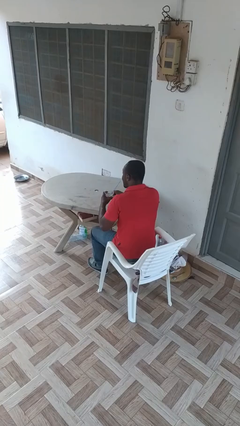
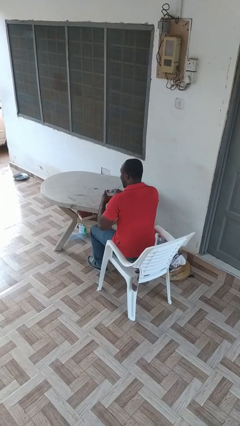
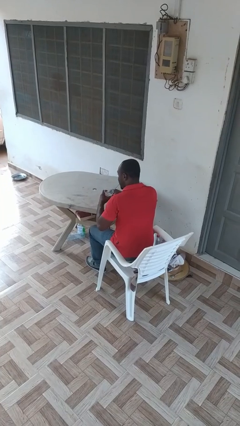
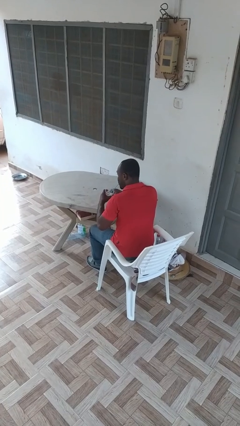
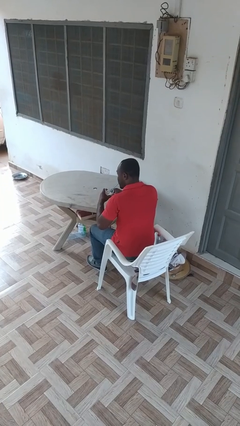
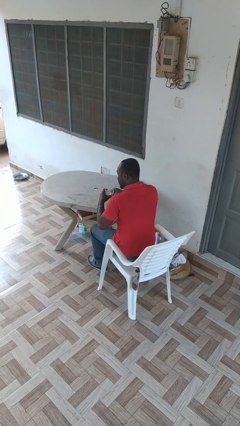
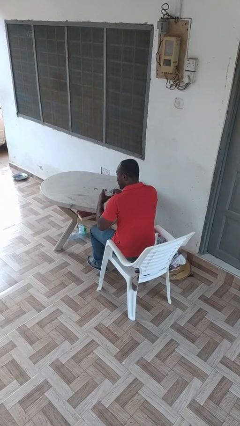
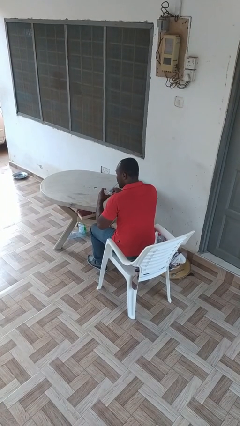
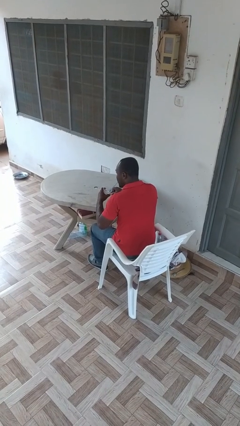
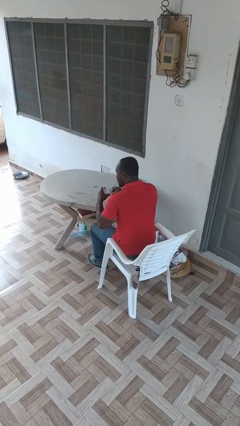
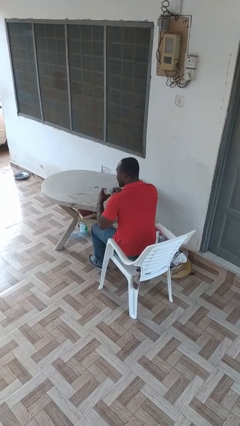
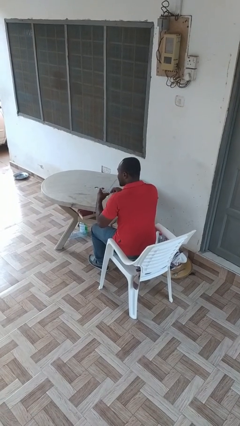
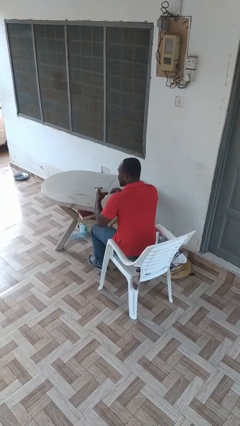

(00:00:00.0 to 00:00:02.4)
person drinks from straw

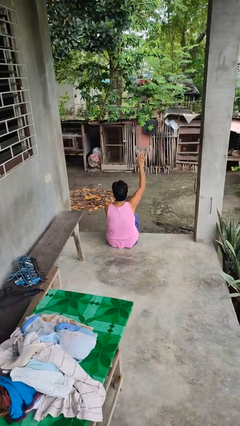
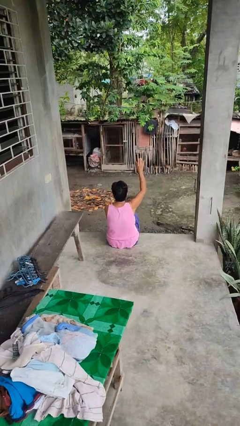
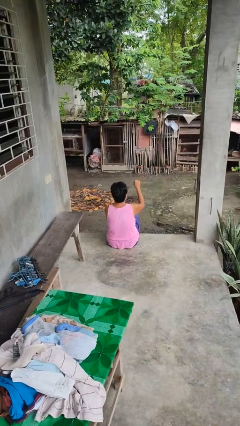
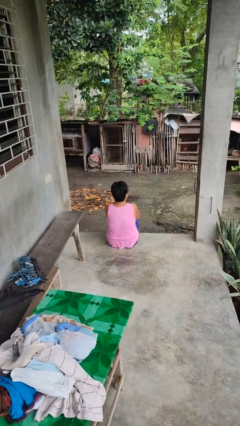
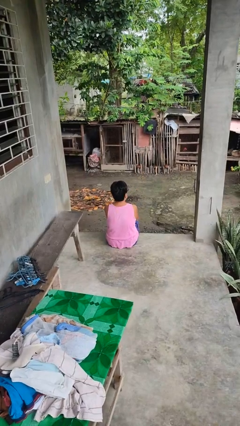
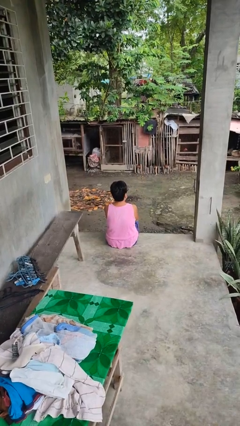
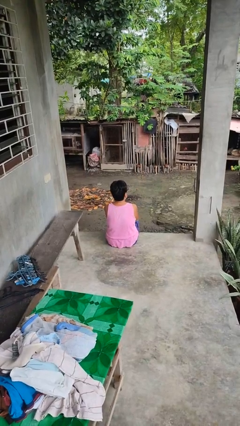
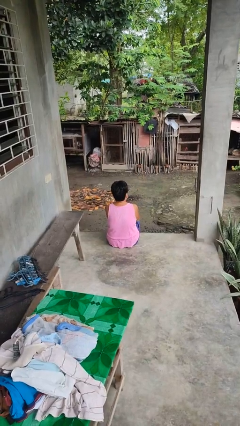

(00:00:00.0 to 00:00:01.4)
person gestures lower hand

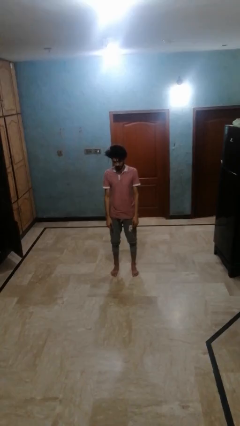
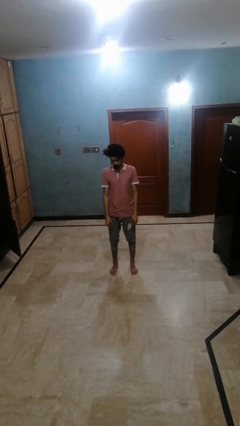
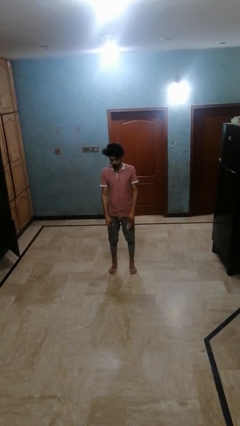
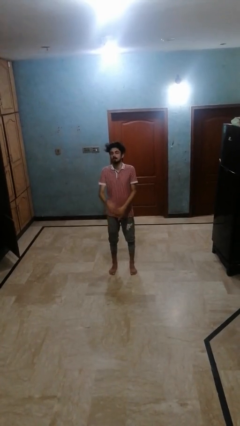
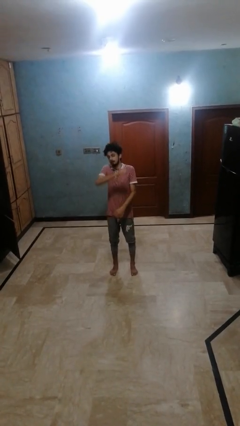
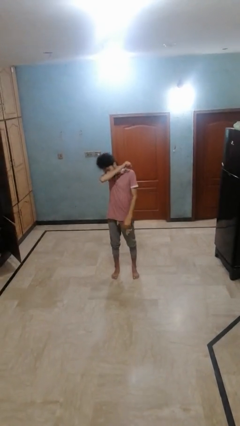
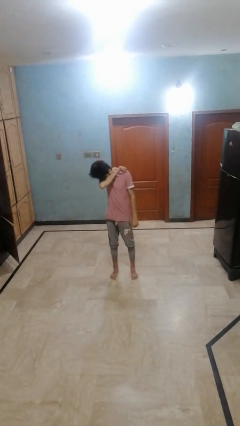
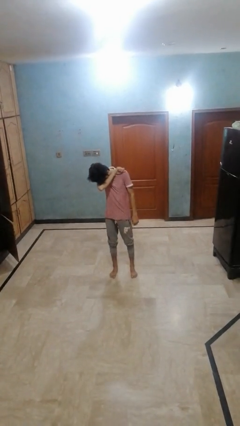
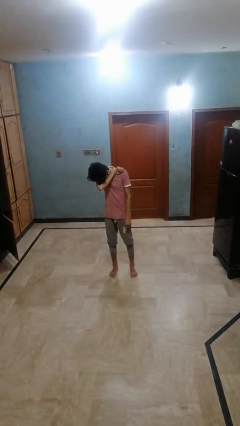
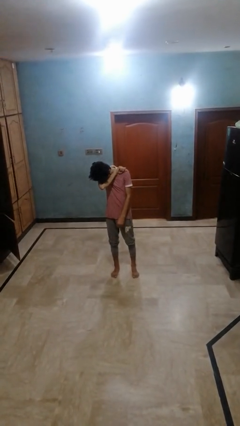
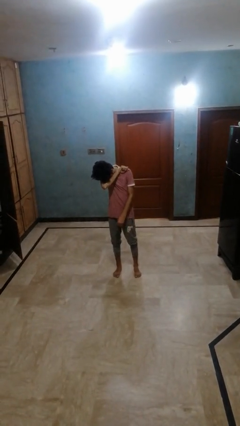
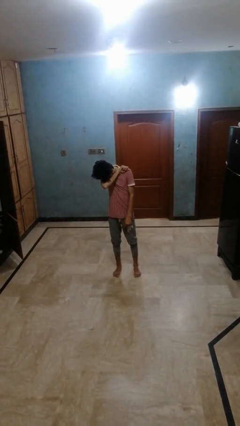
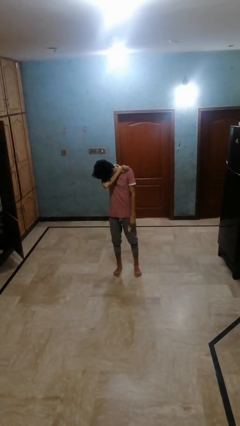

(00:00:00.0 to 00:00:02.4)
person sneezes into arm

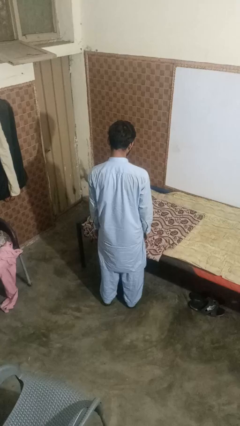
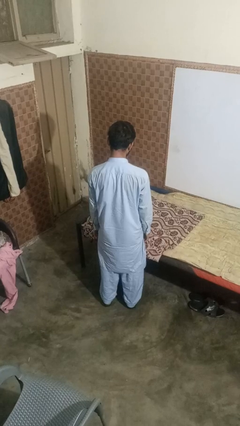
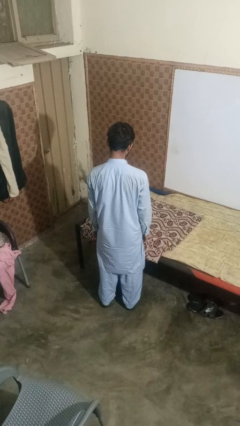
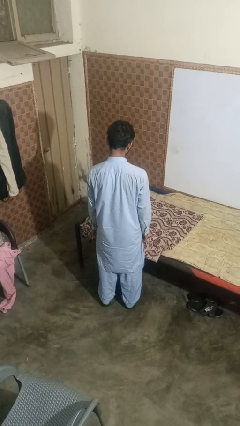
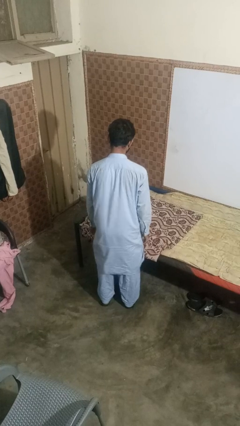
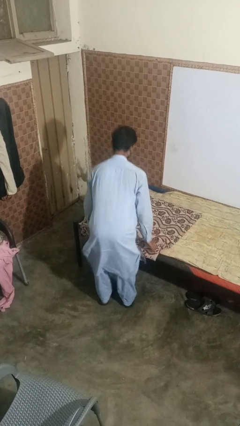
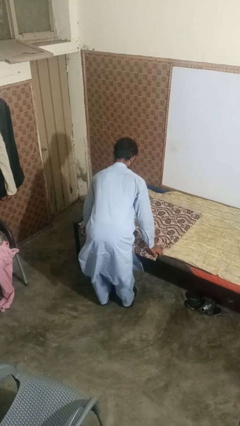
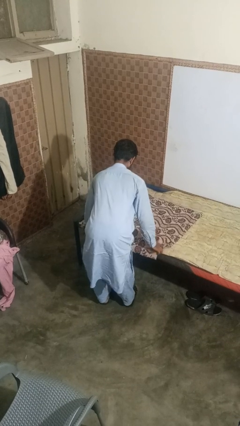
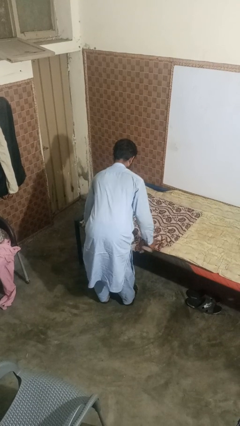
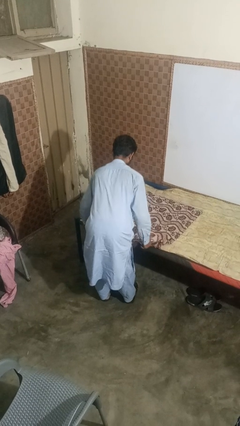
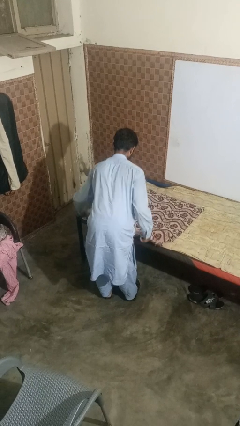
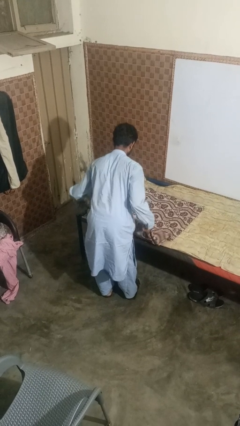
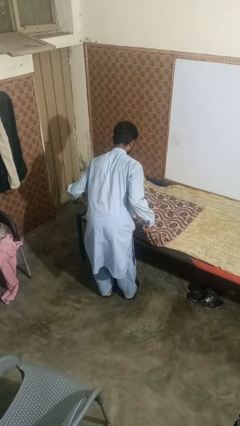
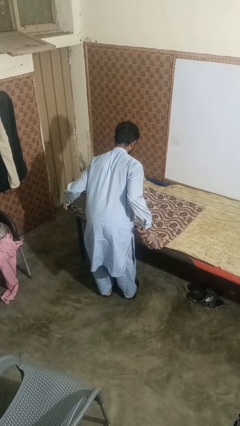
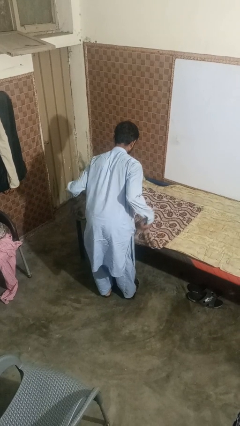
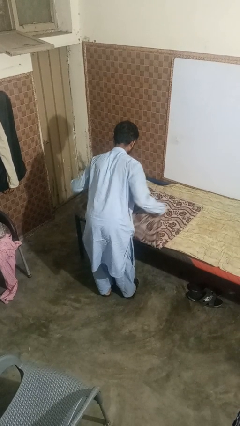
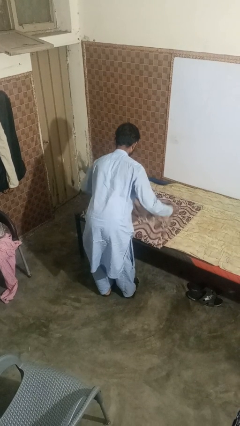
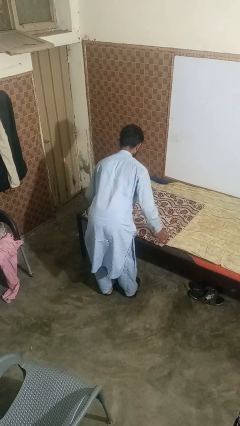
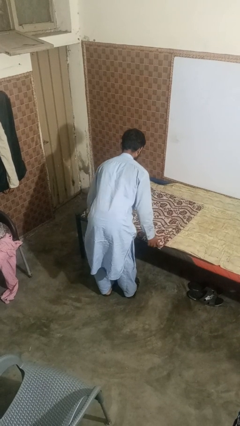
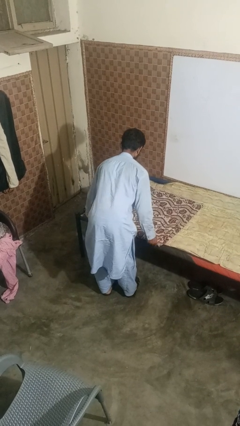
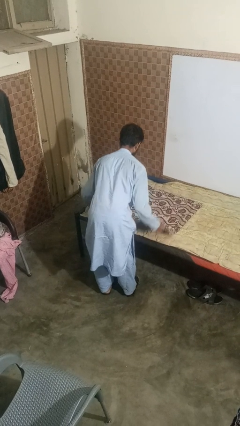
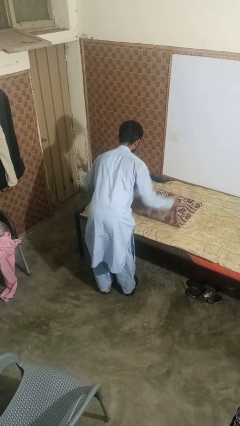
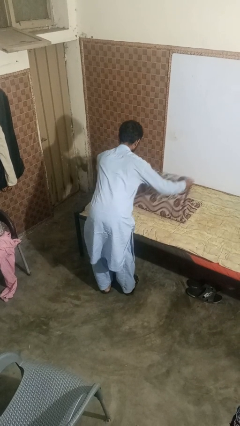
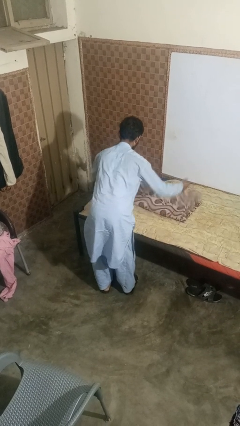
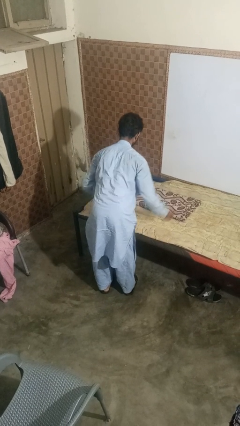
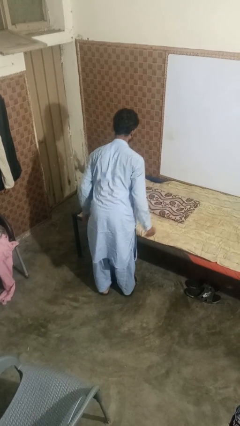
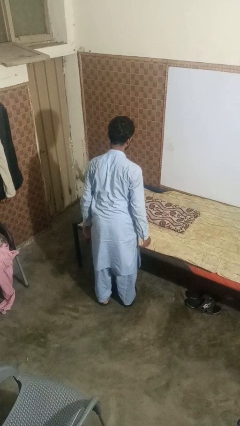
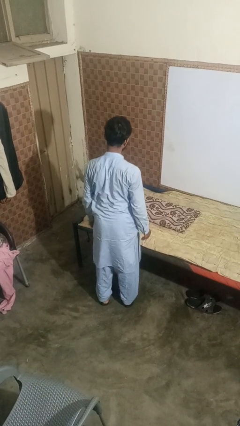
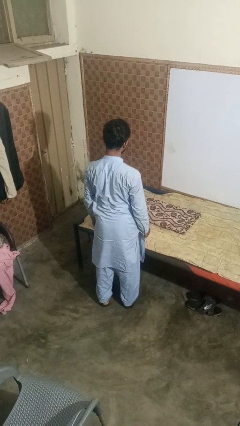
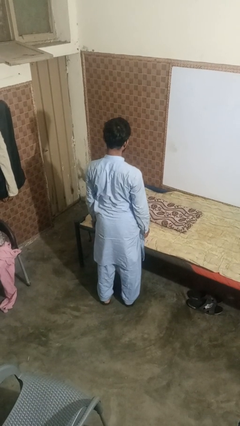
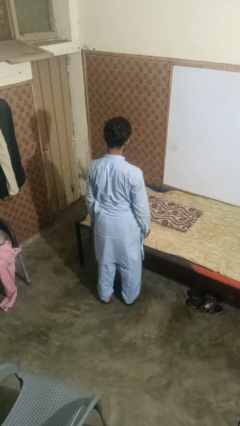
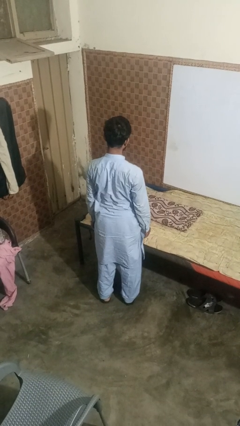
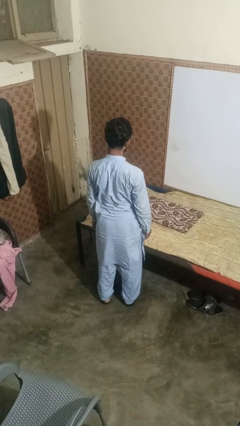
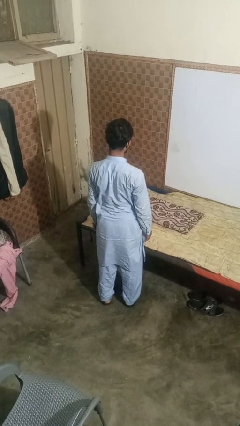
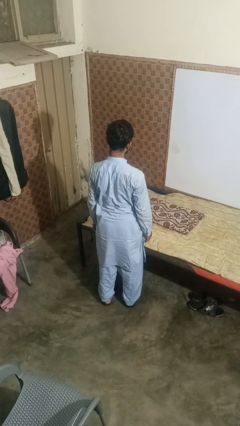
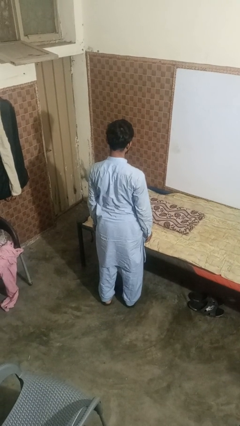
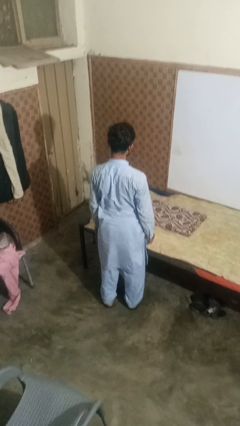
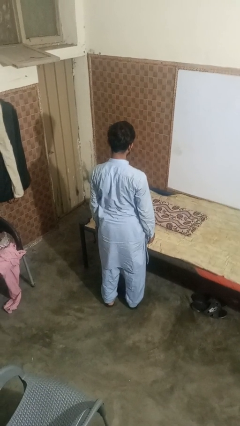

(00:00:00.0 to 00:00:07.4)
person folds blanket

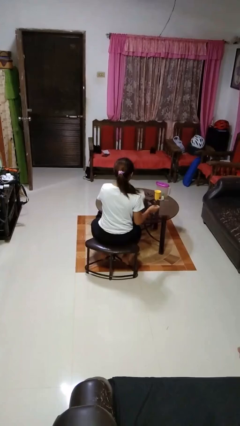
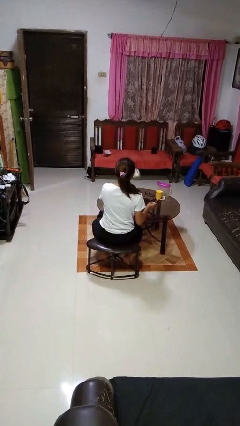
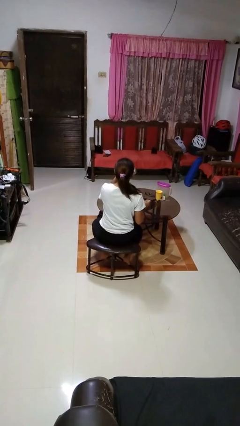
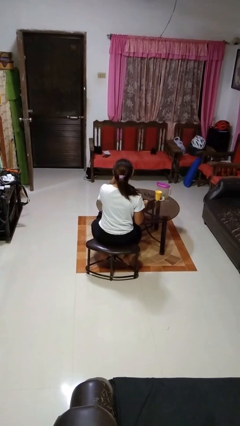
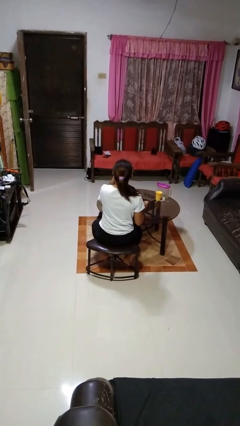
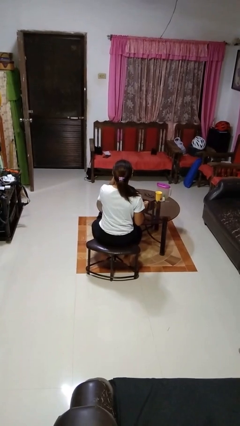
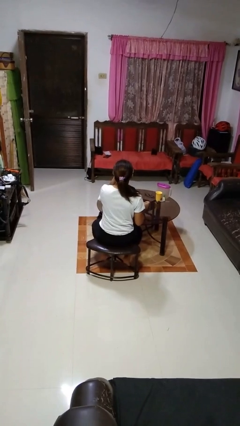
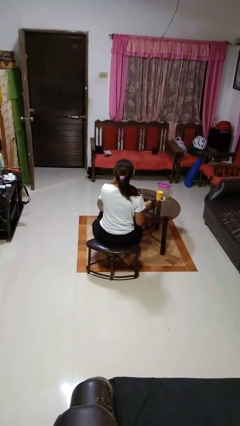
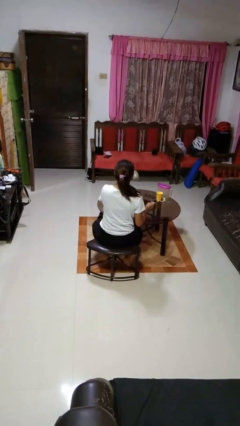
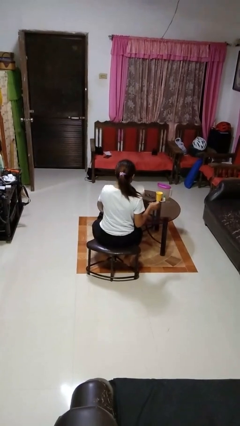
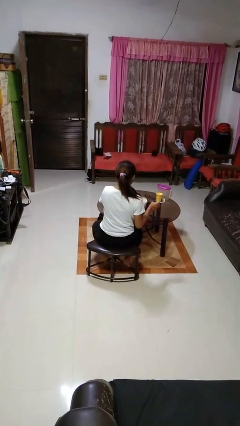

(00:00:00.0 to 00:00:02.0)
person drinks from mug

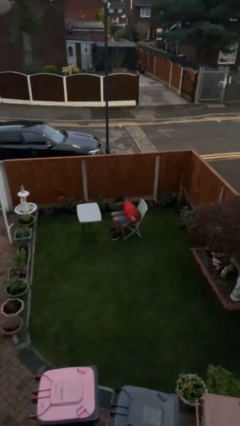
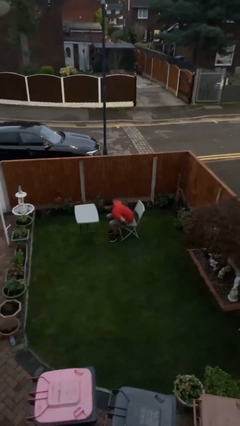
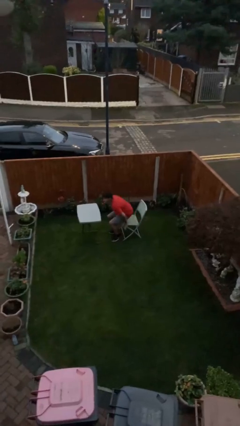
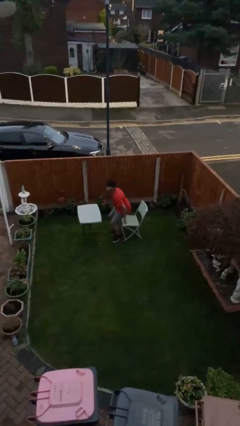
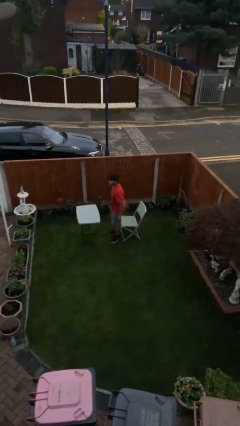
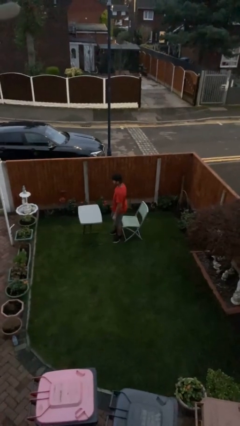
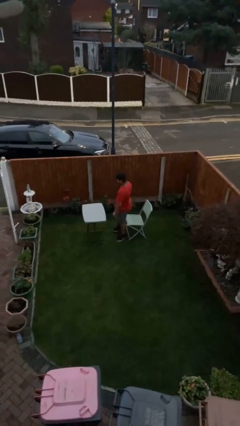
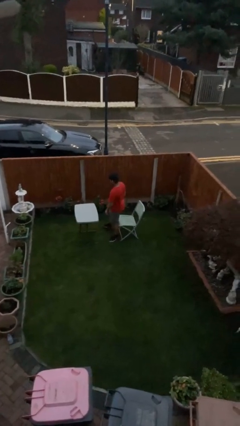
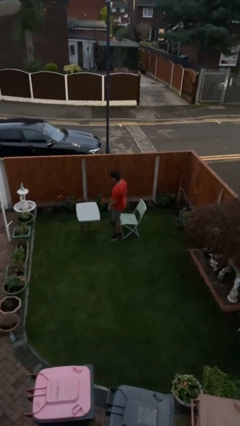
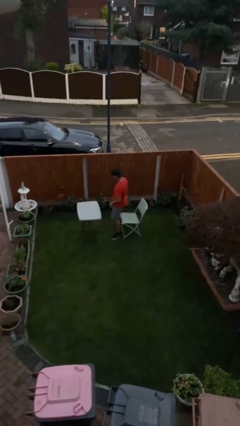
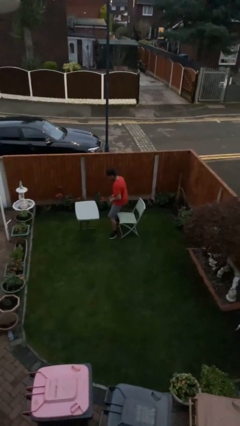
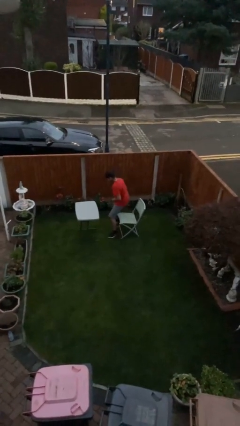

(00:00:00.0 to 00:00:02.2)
person stands up
